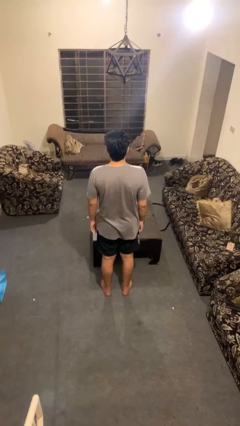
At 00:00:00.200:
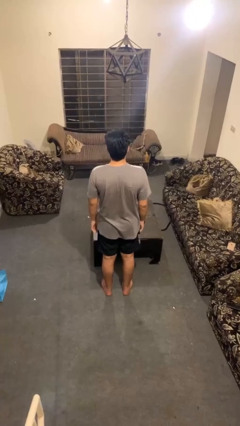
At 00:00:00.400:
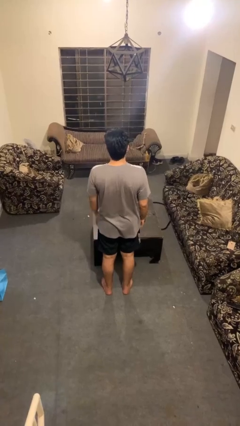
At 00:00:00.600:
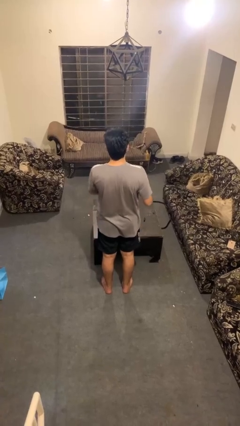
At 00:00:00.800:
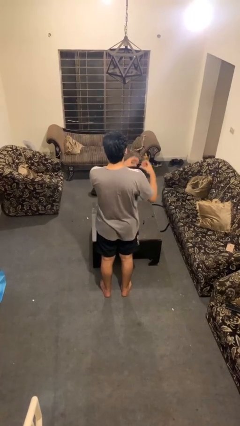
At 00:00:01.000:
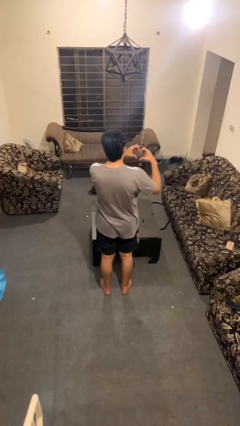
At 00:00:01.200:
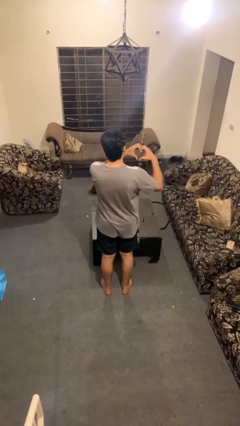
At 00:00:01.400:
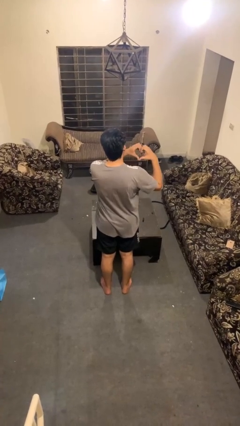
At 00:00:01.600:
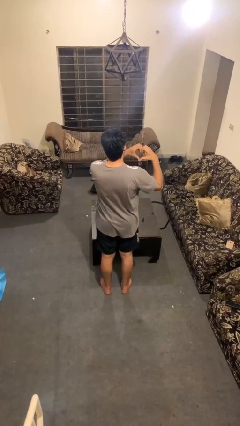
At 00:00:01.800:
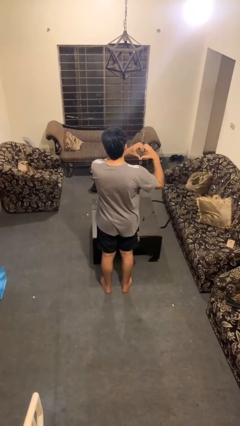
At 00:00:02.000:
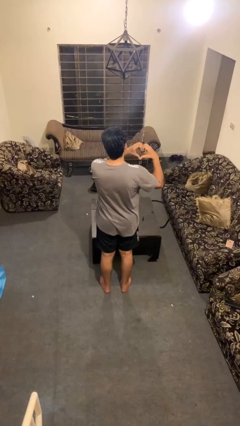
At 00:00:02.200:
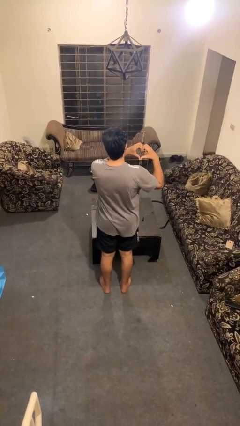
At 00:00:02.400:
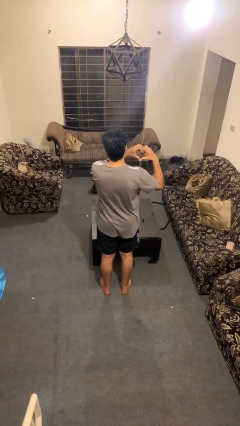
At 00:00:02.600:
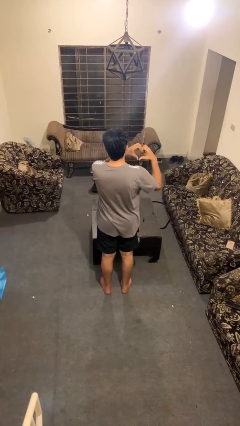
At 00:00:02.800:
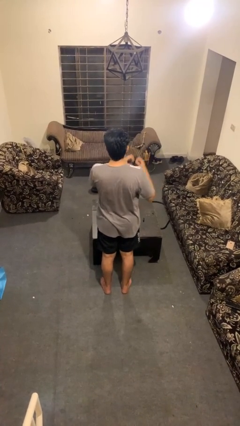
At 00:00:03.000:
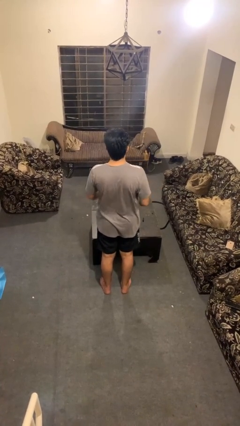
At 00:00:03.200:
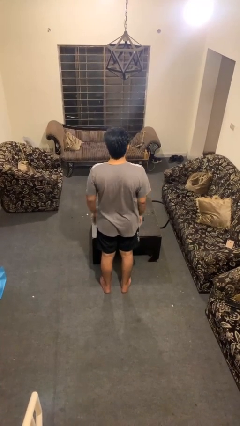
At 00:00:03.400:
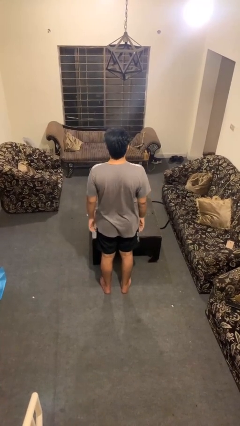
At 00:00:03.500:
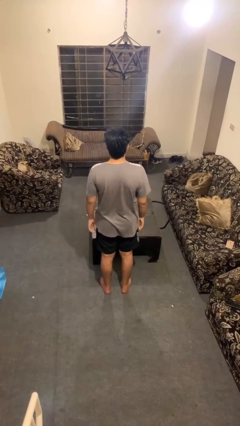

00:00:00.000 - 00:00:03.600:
person gestures heart

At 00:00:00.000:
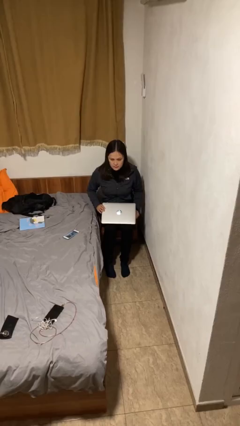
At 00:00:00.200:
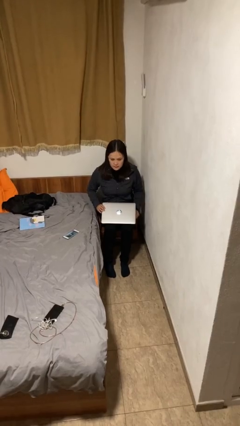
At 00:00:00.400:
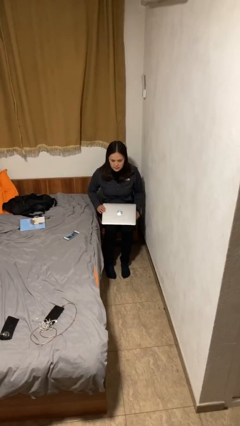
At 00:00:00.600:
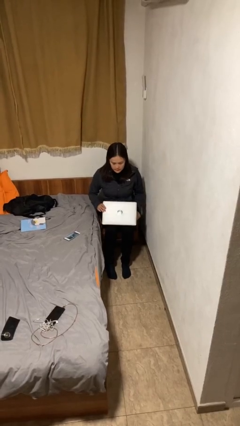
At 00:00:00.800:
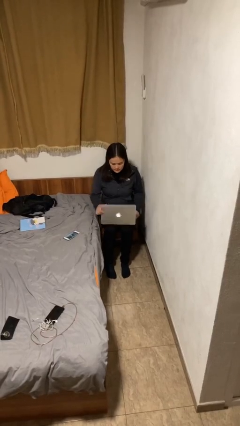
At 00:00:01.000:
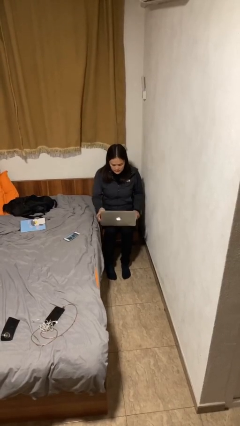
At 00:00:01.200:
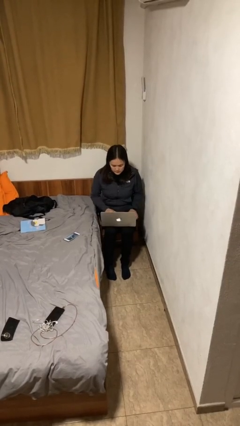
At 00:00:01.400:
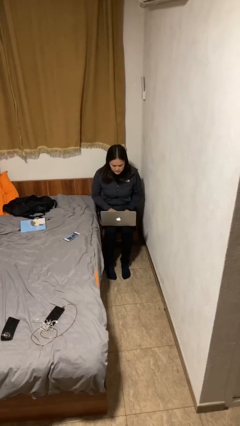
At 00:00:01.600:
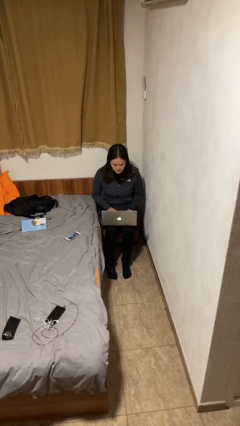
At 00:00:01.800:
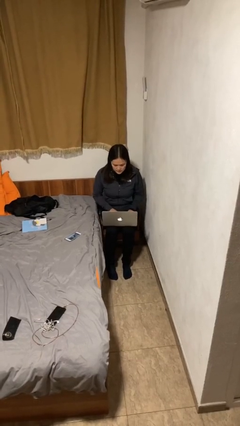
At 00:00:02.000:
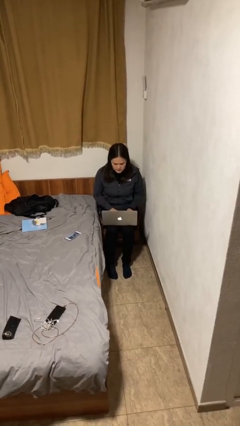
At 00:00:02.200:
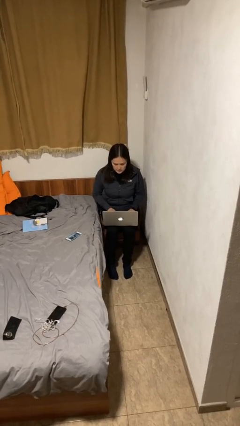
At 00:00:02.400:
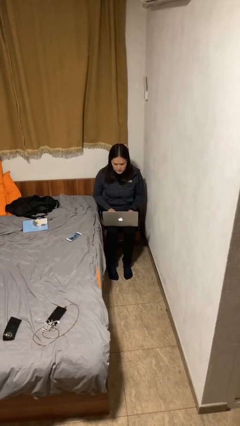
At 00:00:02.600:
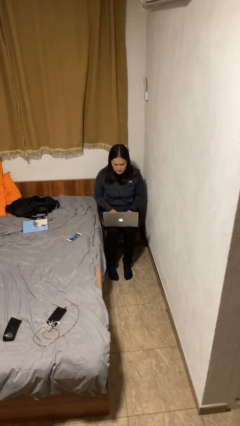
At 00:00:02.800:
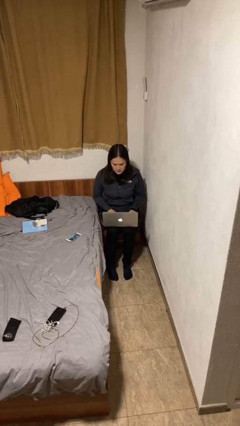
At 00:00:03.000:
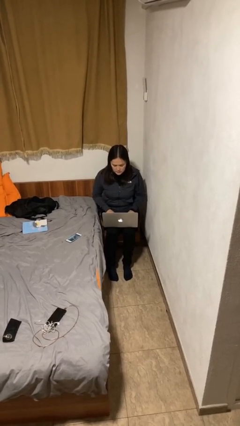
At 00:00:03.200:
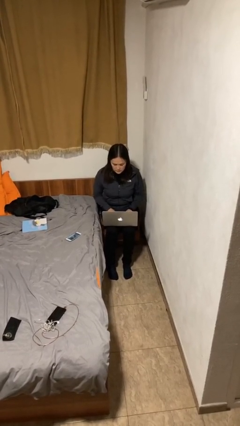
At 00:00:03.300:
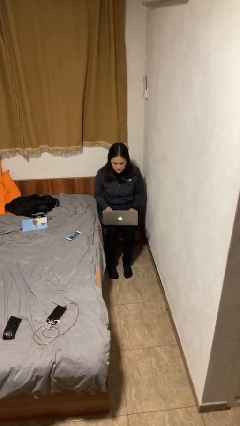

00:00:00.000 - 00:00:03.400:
person interacts with laptop

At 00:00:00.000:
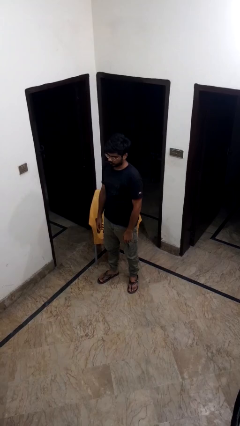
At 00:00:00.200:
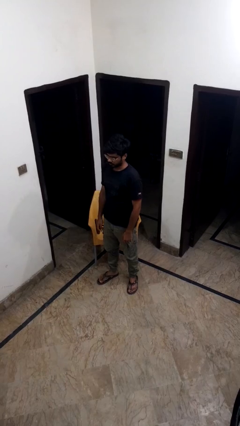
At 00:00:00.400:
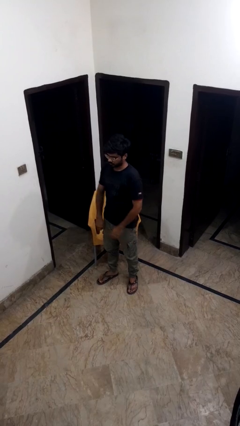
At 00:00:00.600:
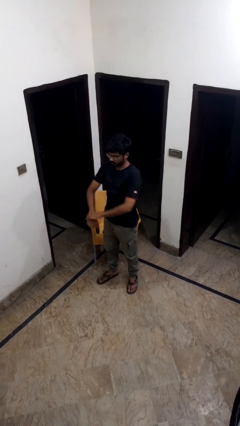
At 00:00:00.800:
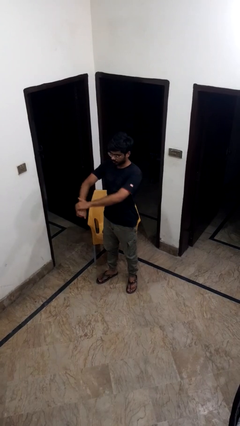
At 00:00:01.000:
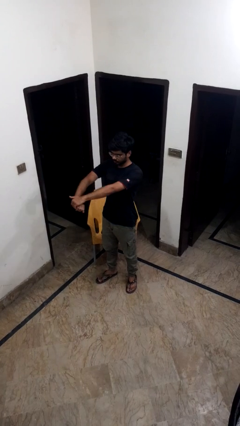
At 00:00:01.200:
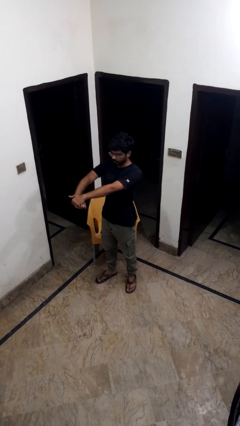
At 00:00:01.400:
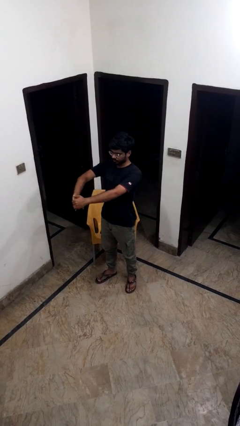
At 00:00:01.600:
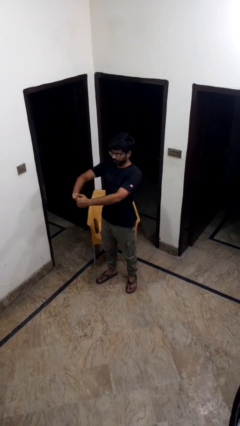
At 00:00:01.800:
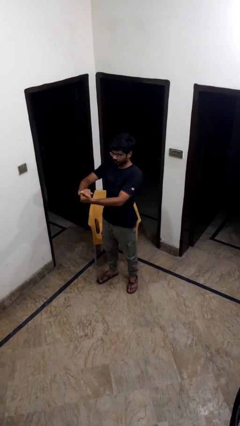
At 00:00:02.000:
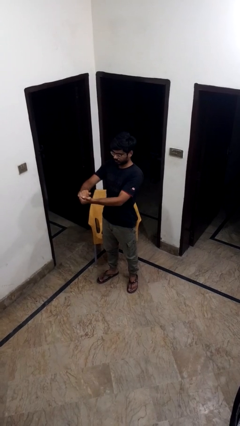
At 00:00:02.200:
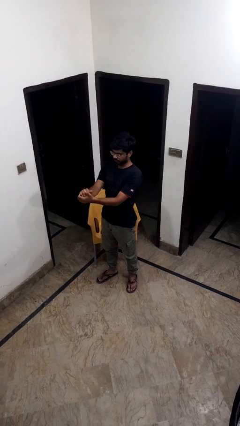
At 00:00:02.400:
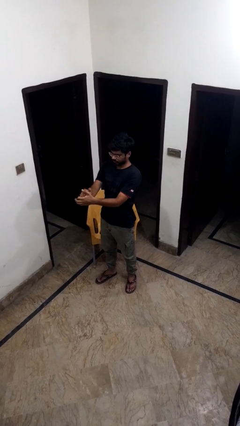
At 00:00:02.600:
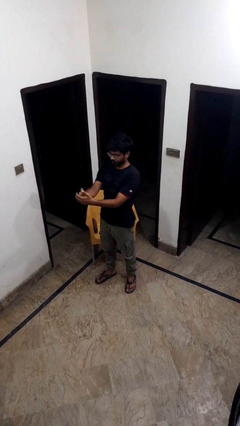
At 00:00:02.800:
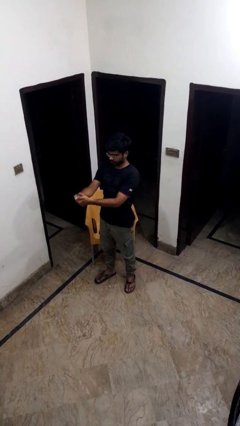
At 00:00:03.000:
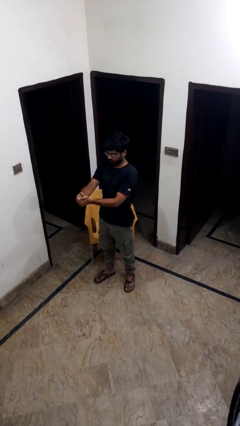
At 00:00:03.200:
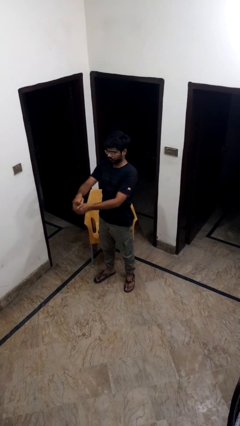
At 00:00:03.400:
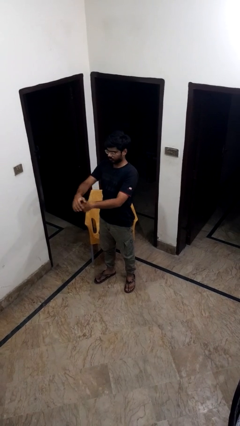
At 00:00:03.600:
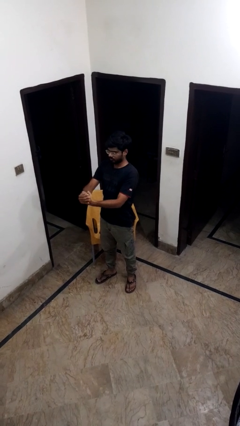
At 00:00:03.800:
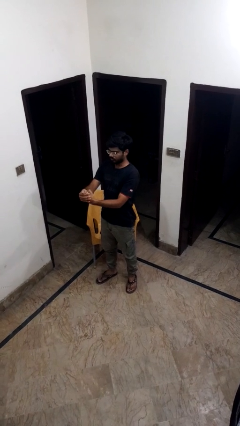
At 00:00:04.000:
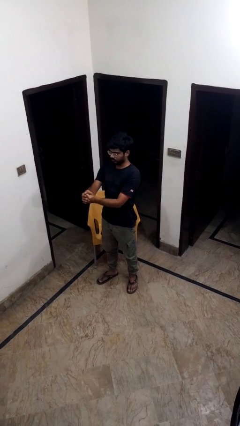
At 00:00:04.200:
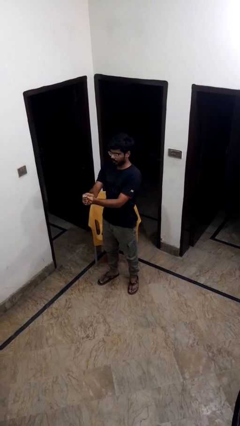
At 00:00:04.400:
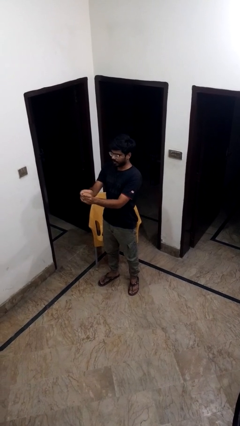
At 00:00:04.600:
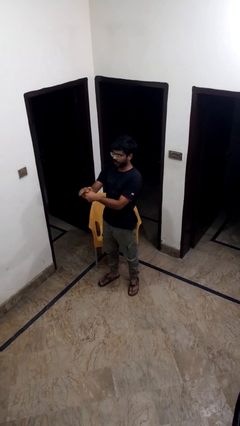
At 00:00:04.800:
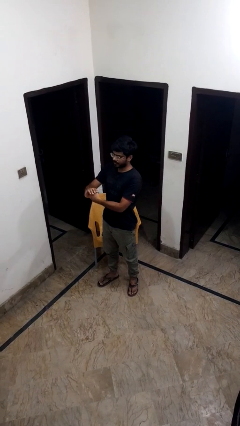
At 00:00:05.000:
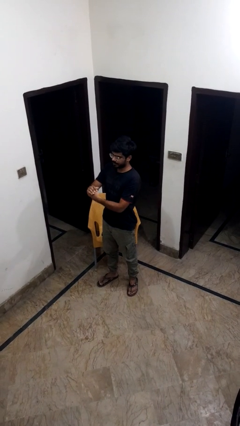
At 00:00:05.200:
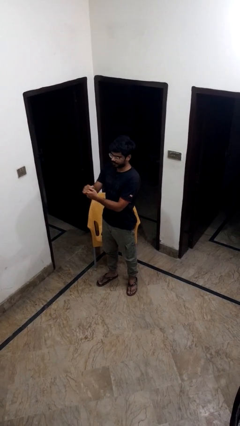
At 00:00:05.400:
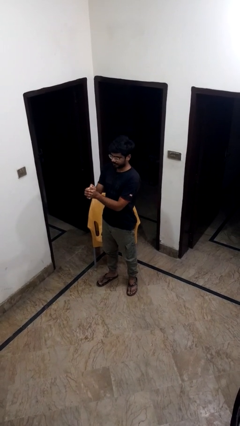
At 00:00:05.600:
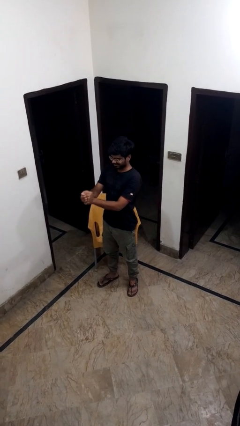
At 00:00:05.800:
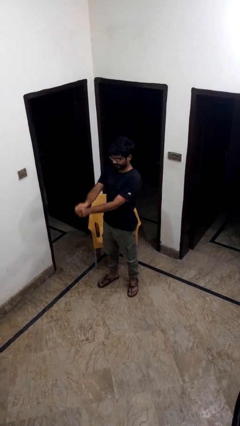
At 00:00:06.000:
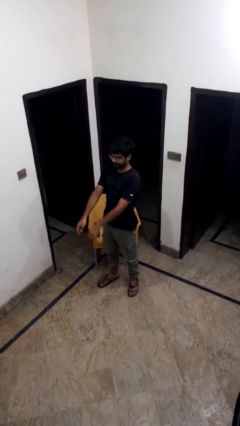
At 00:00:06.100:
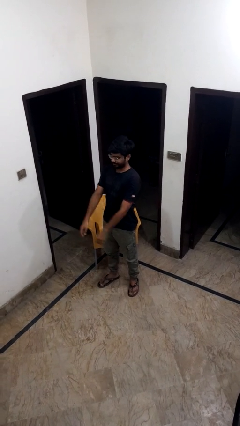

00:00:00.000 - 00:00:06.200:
person cracks knuckles

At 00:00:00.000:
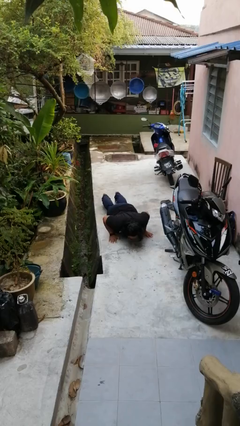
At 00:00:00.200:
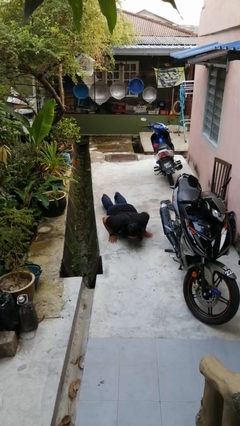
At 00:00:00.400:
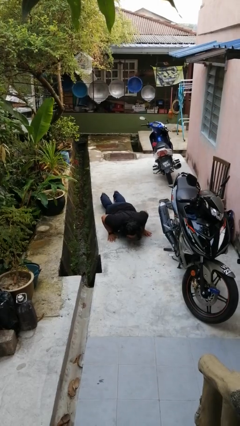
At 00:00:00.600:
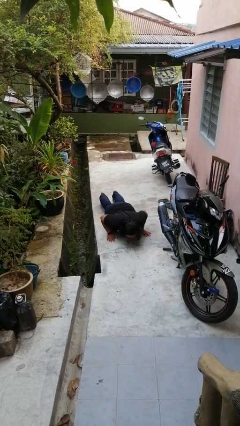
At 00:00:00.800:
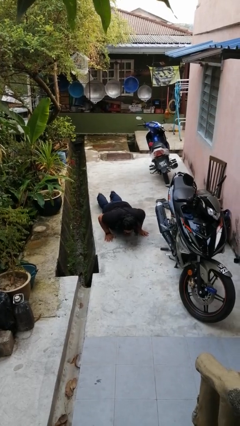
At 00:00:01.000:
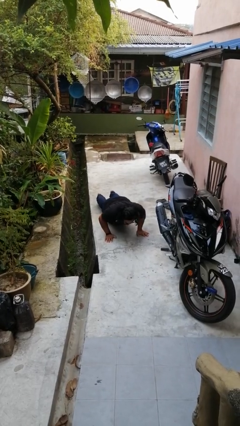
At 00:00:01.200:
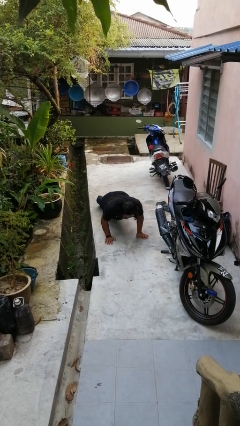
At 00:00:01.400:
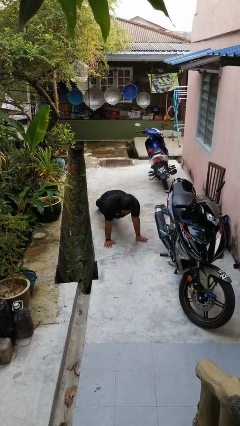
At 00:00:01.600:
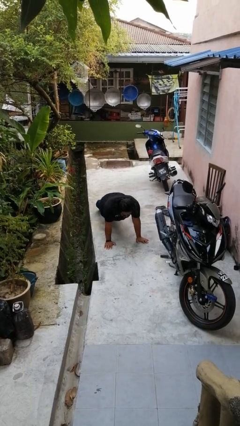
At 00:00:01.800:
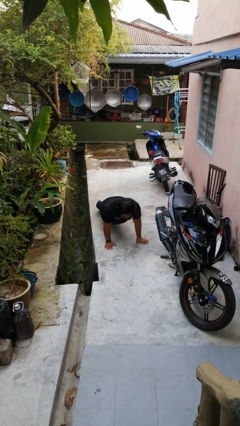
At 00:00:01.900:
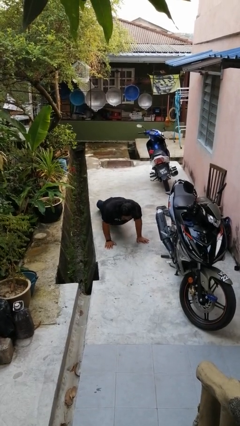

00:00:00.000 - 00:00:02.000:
person exercises with pushup

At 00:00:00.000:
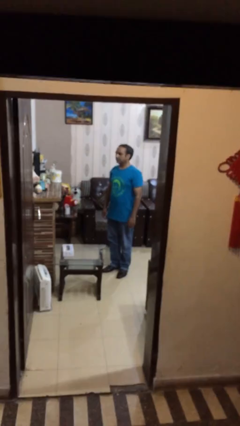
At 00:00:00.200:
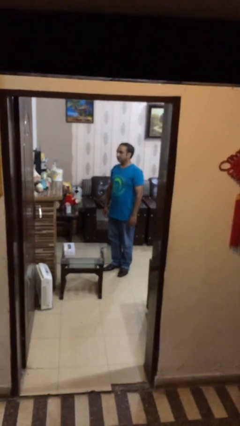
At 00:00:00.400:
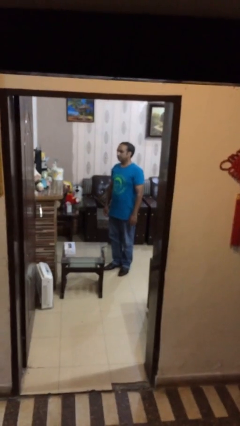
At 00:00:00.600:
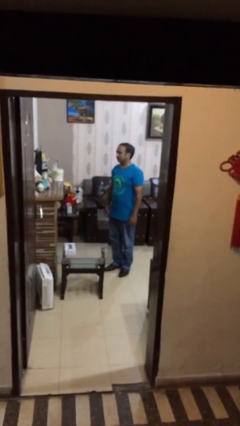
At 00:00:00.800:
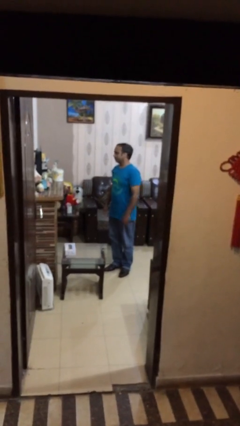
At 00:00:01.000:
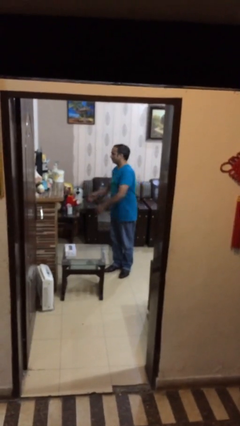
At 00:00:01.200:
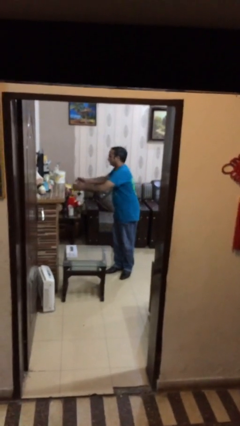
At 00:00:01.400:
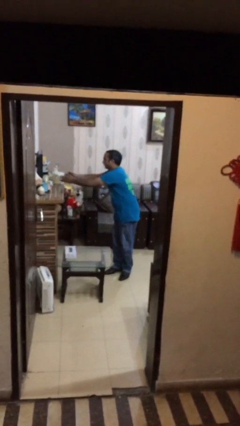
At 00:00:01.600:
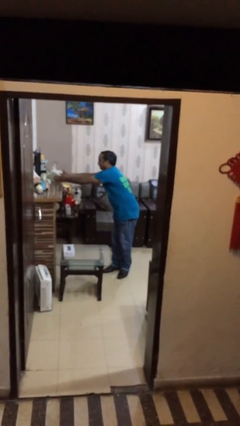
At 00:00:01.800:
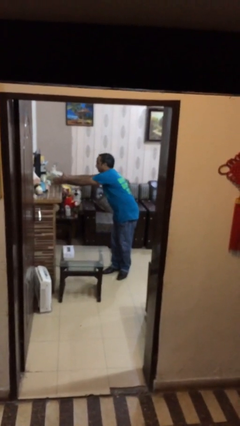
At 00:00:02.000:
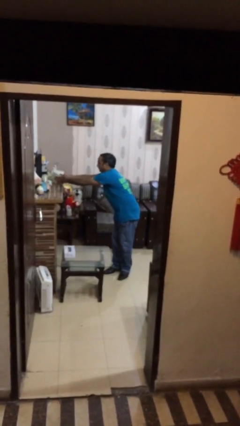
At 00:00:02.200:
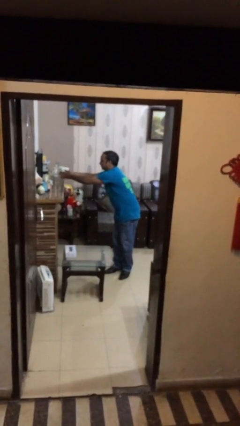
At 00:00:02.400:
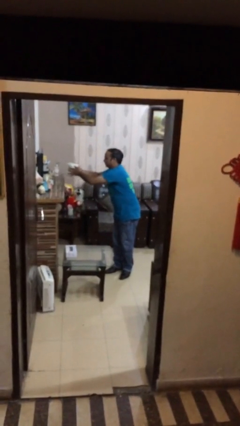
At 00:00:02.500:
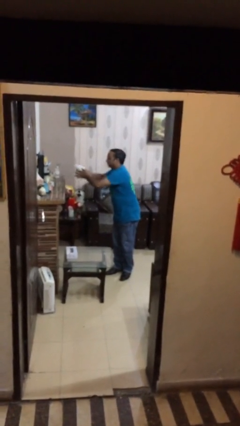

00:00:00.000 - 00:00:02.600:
person picks up object from shelf
